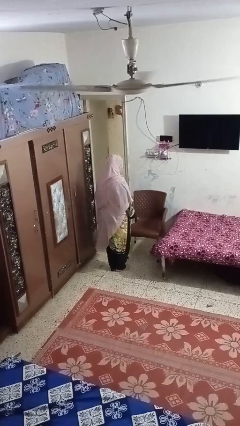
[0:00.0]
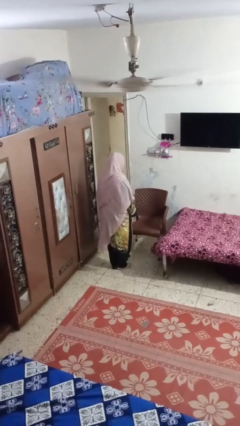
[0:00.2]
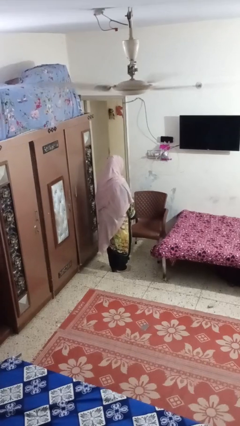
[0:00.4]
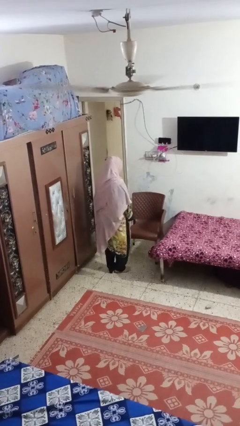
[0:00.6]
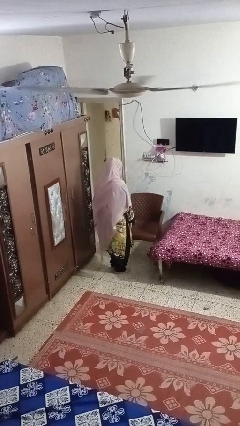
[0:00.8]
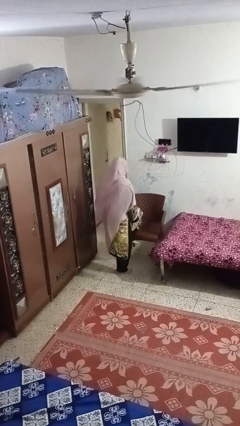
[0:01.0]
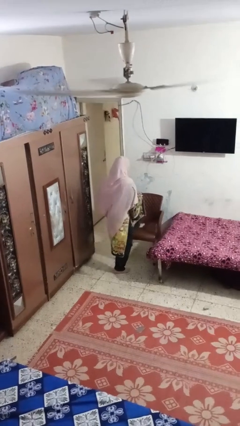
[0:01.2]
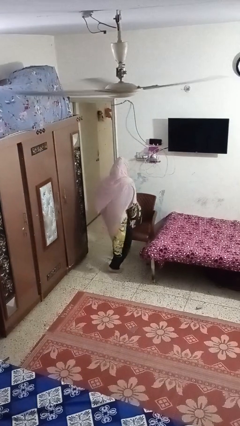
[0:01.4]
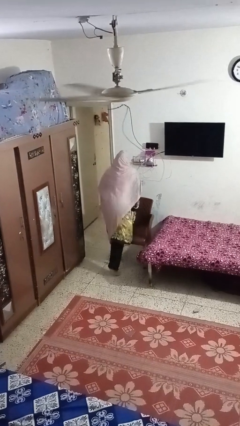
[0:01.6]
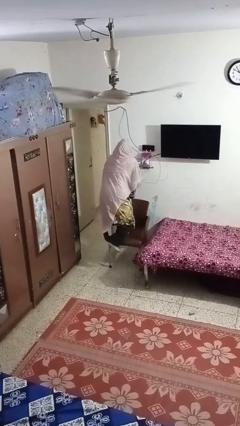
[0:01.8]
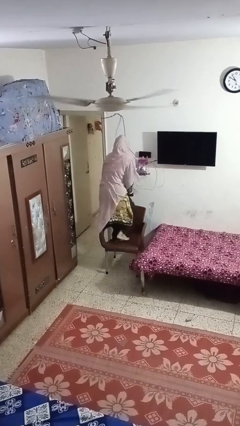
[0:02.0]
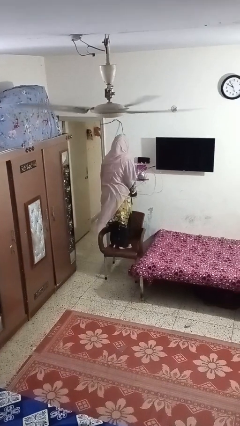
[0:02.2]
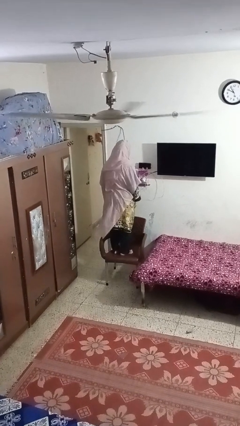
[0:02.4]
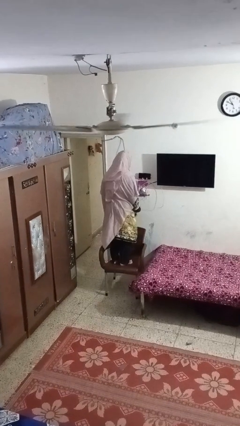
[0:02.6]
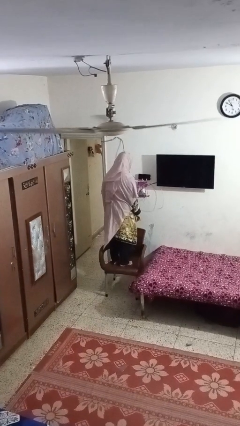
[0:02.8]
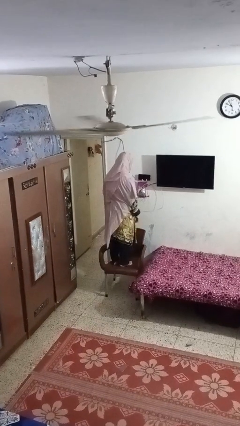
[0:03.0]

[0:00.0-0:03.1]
person climbs on chair

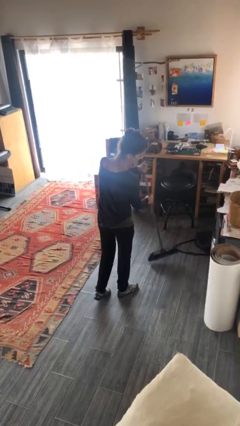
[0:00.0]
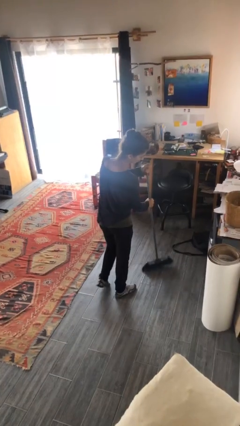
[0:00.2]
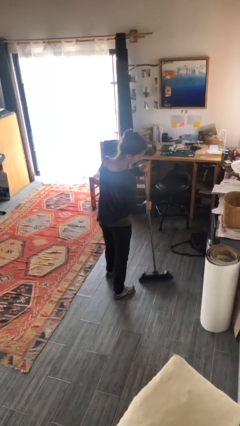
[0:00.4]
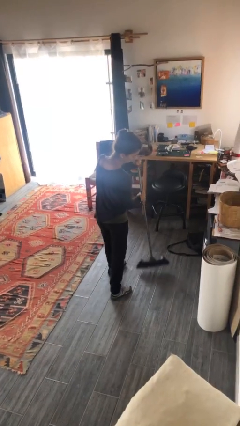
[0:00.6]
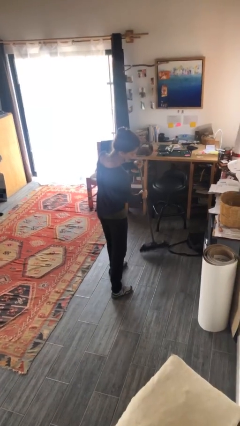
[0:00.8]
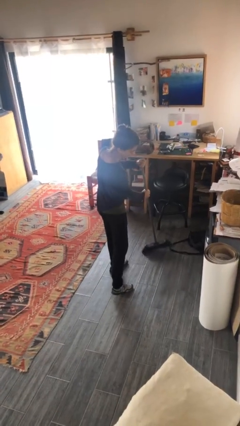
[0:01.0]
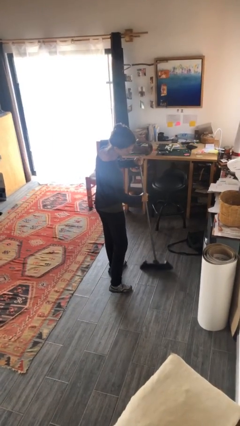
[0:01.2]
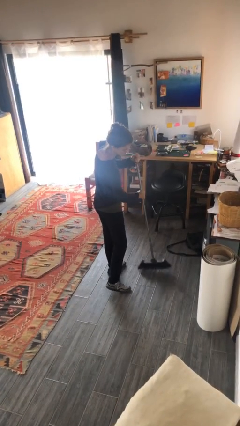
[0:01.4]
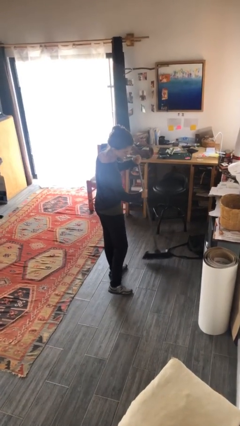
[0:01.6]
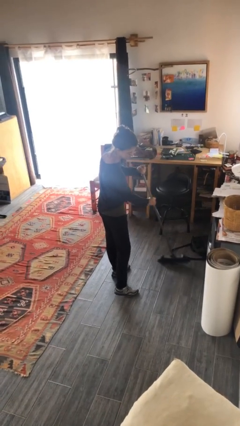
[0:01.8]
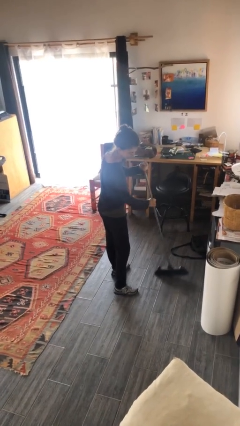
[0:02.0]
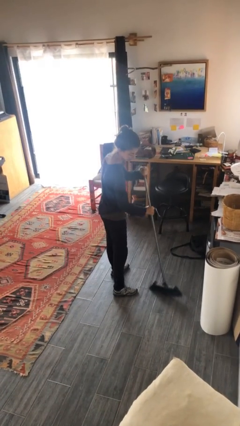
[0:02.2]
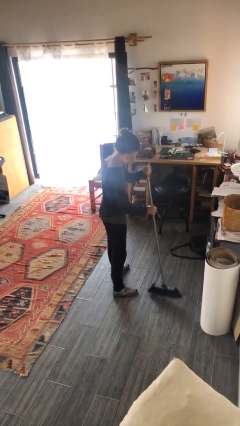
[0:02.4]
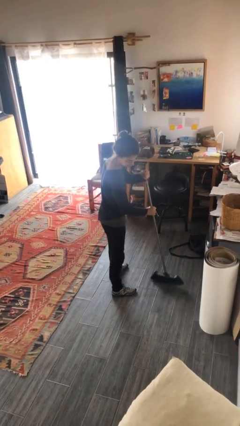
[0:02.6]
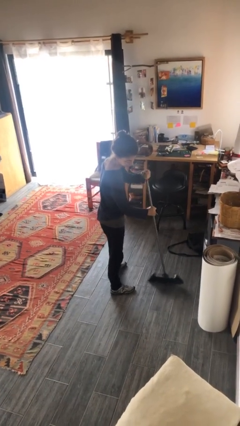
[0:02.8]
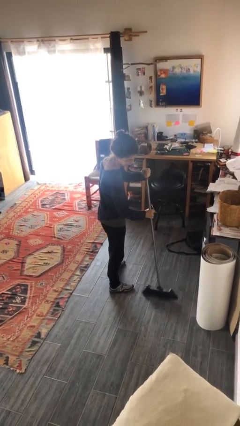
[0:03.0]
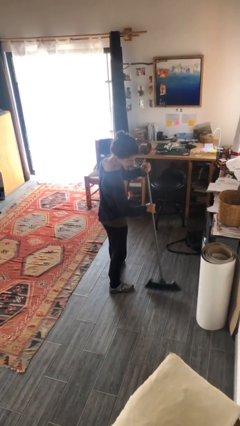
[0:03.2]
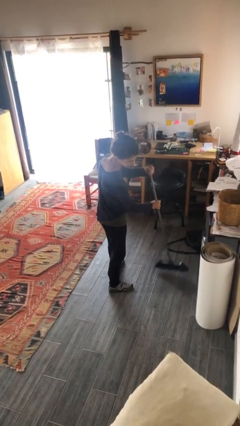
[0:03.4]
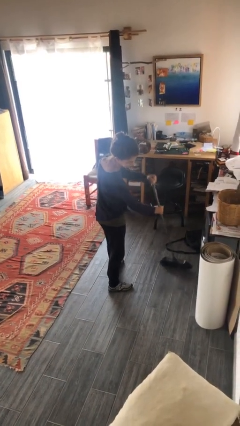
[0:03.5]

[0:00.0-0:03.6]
person sweeps floor

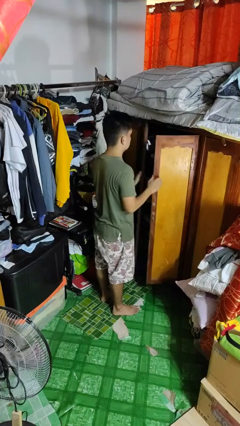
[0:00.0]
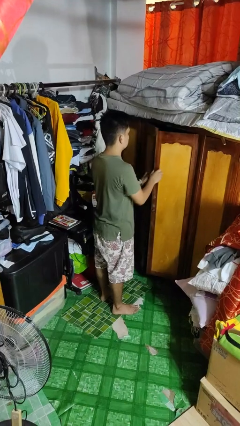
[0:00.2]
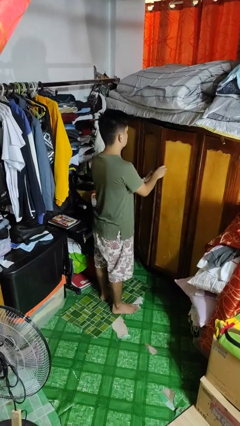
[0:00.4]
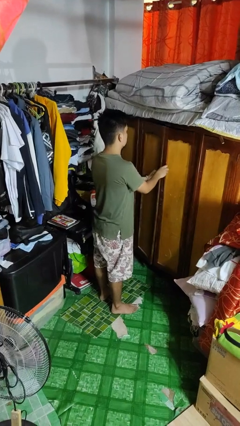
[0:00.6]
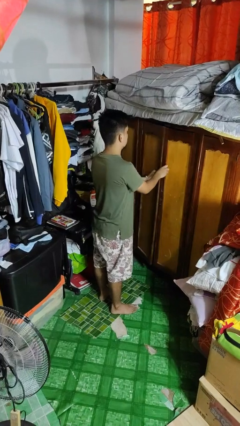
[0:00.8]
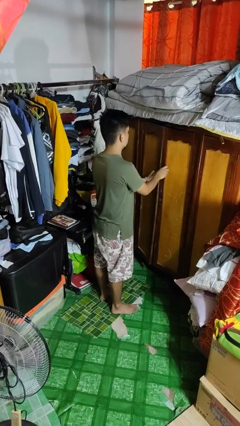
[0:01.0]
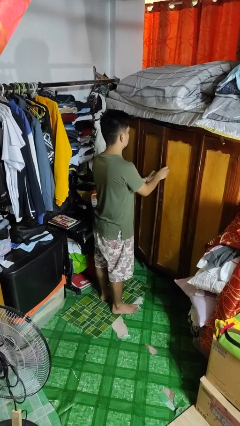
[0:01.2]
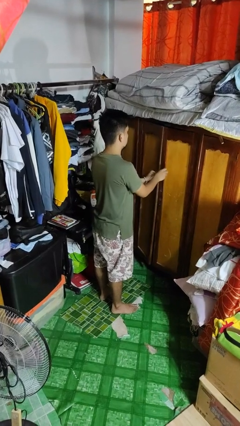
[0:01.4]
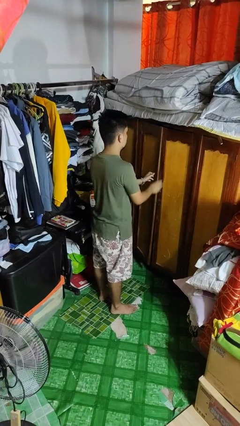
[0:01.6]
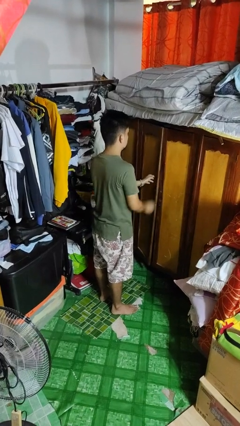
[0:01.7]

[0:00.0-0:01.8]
person closes closet door

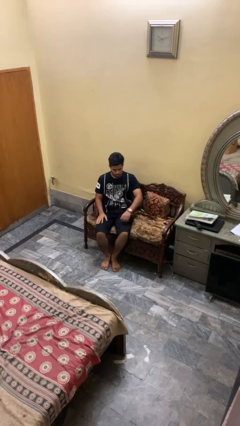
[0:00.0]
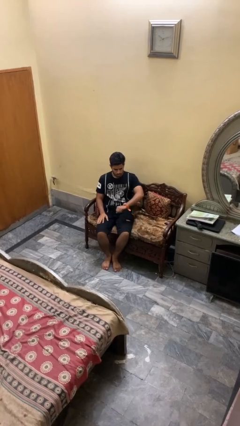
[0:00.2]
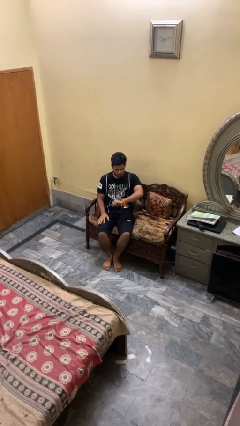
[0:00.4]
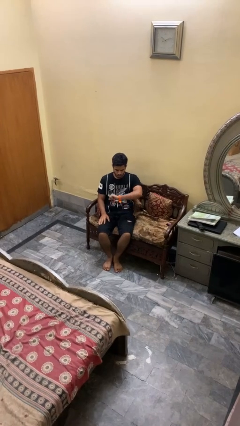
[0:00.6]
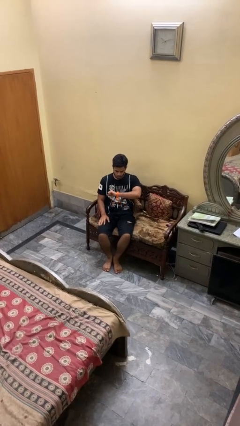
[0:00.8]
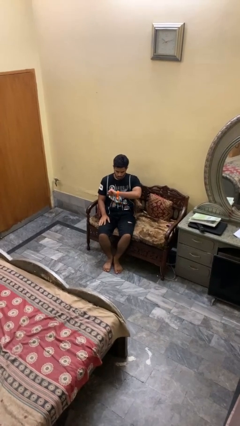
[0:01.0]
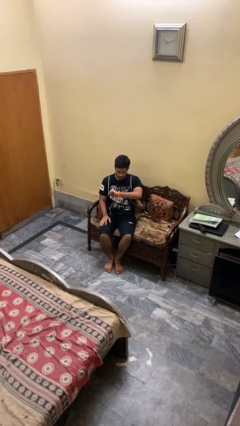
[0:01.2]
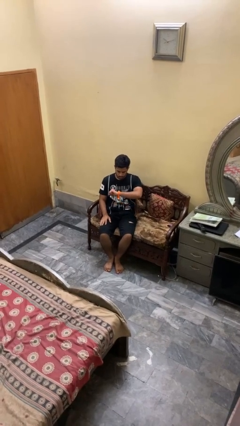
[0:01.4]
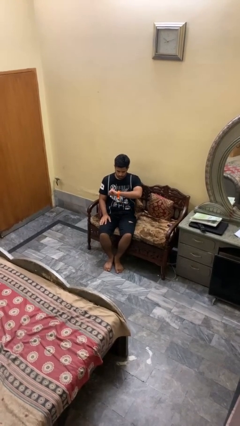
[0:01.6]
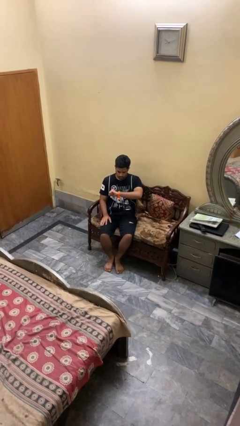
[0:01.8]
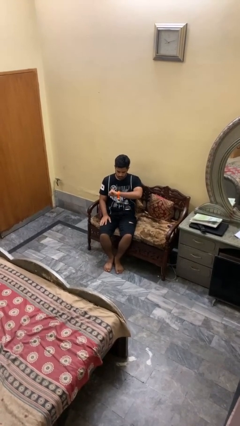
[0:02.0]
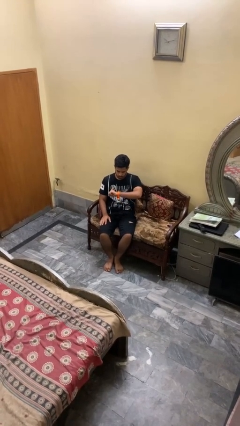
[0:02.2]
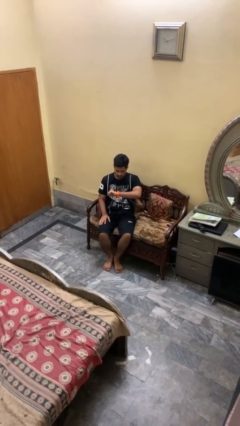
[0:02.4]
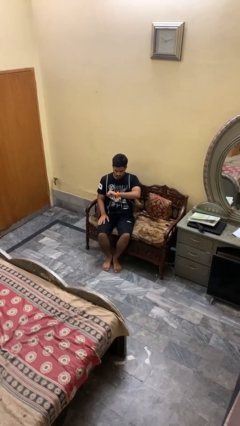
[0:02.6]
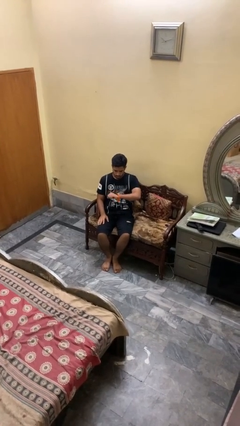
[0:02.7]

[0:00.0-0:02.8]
person looks at wristwatch

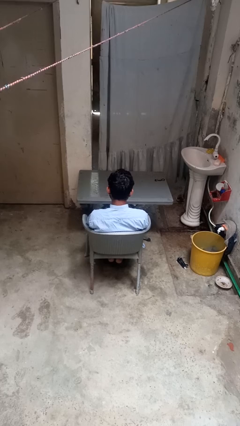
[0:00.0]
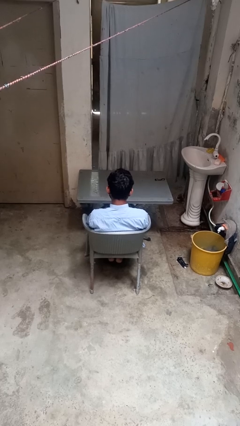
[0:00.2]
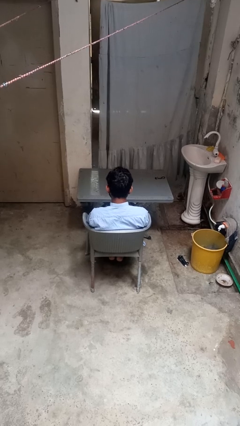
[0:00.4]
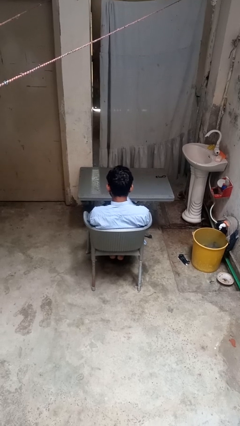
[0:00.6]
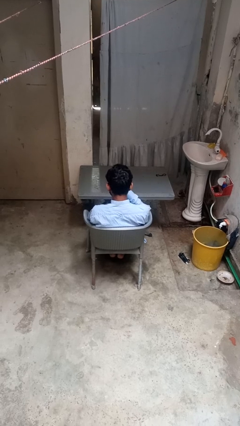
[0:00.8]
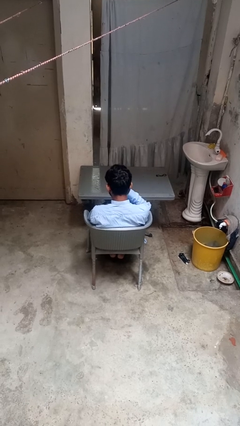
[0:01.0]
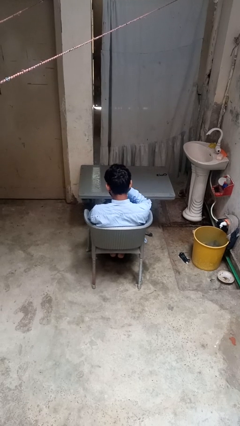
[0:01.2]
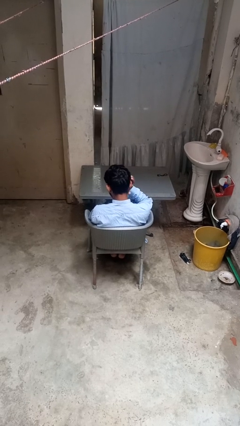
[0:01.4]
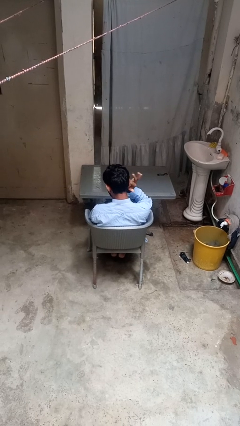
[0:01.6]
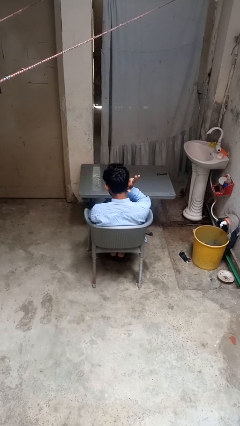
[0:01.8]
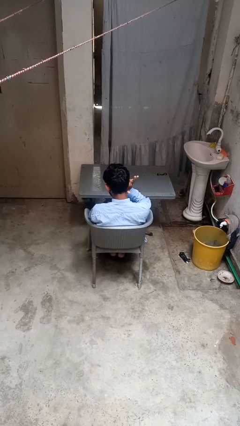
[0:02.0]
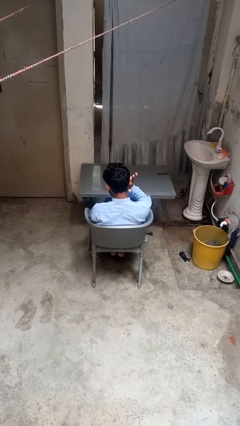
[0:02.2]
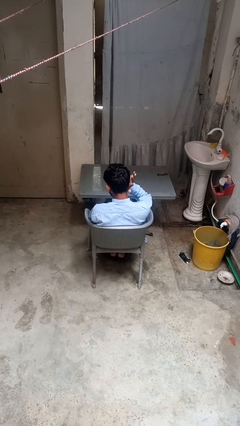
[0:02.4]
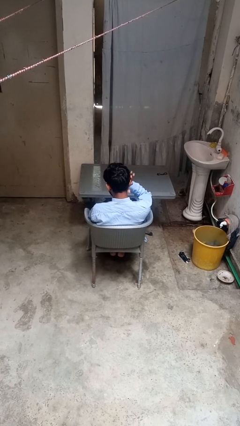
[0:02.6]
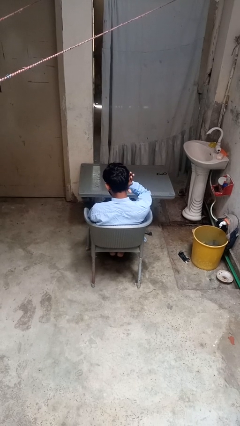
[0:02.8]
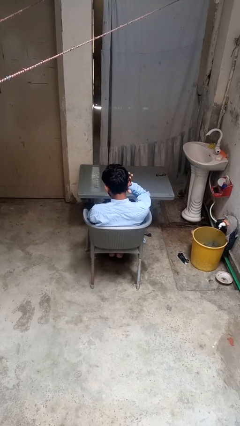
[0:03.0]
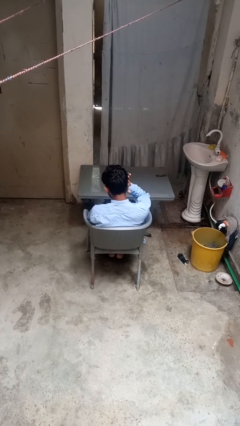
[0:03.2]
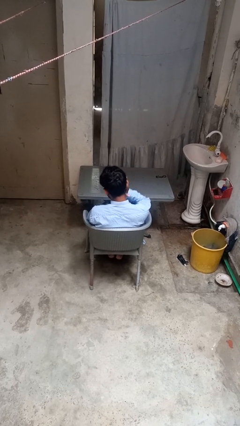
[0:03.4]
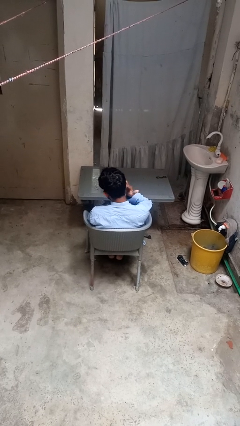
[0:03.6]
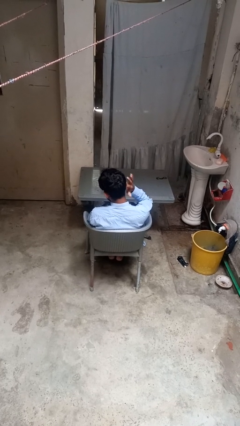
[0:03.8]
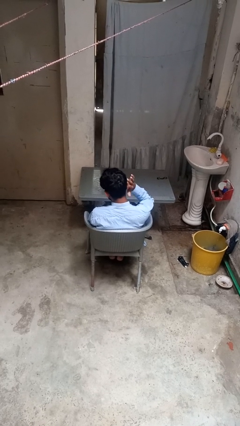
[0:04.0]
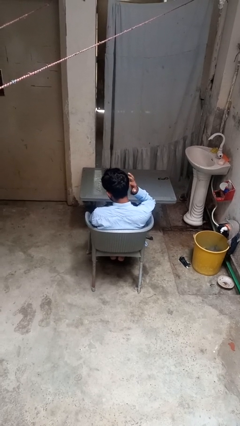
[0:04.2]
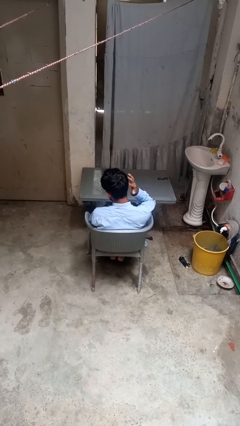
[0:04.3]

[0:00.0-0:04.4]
person puts fingers in ear

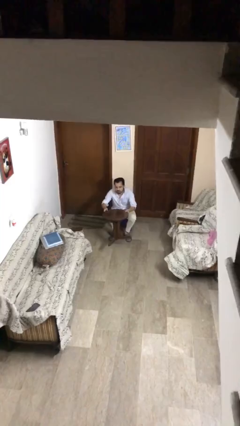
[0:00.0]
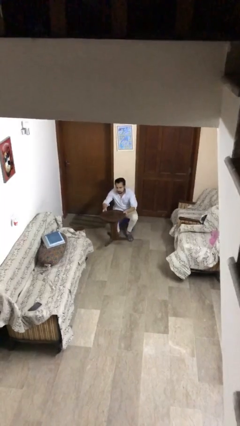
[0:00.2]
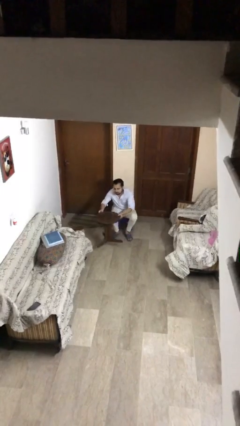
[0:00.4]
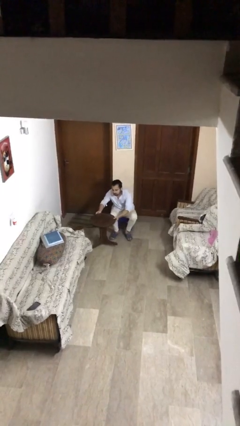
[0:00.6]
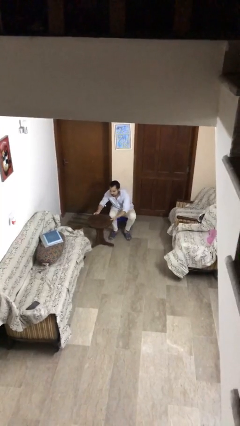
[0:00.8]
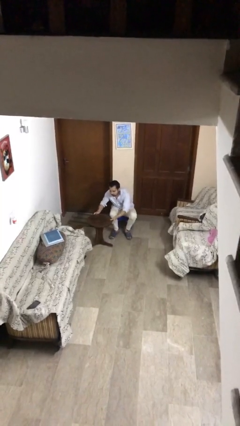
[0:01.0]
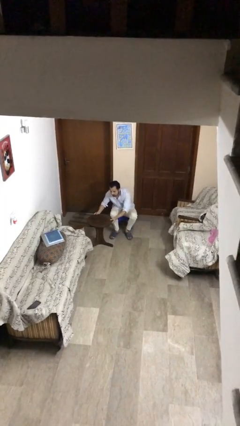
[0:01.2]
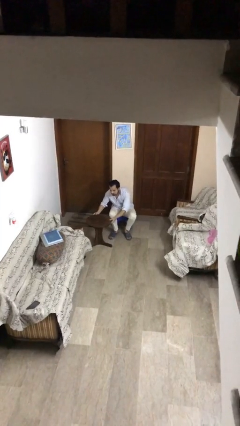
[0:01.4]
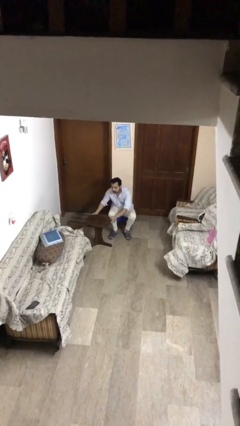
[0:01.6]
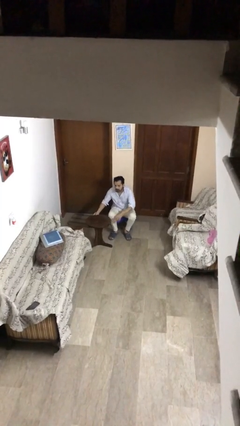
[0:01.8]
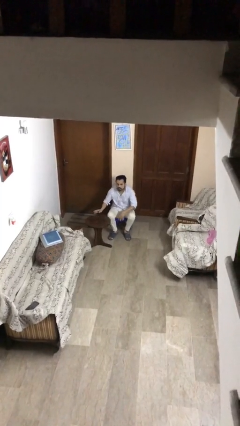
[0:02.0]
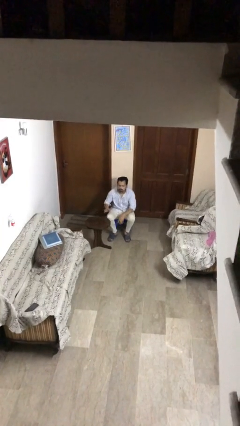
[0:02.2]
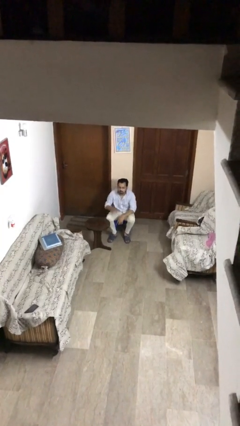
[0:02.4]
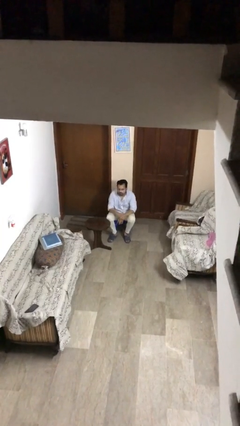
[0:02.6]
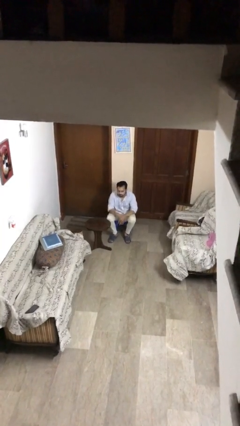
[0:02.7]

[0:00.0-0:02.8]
person puts down object on floor
